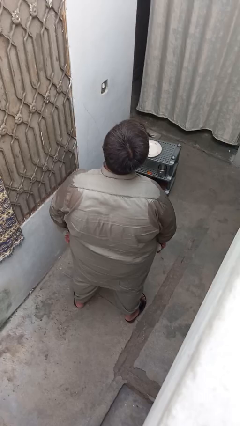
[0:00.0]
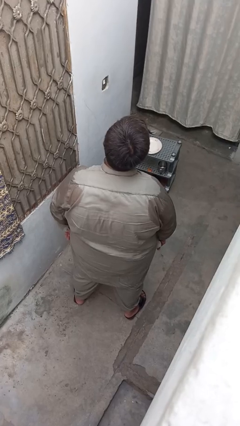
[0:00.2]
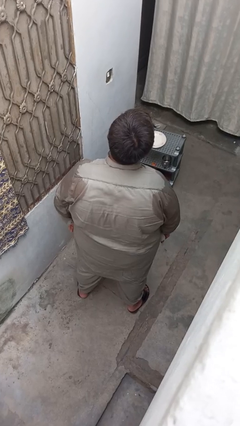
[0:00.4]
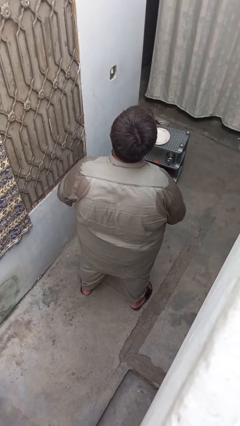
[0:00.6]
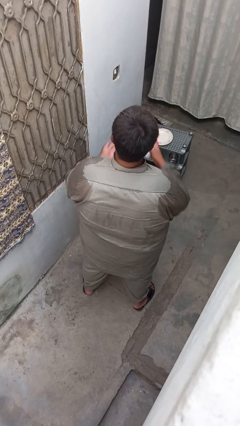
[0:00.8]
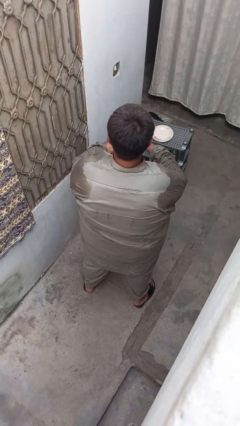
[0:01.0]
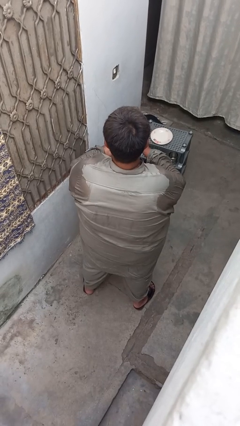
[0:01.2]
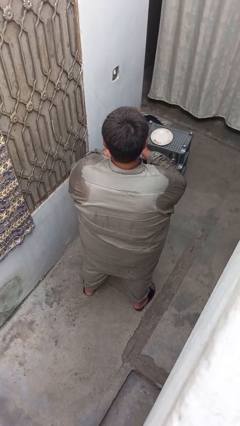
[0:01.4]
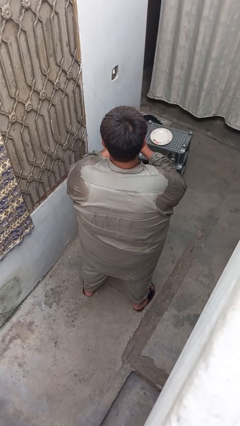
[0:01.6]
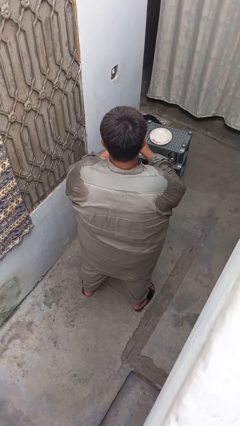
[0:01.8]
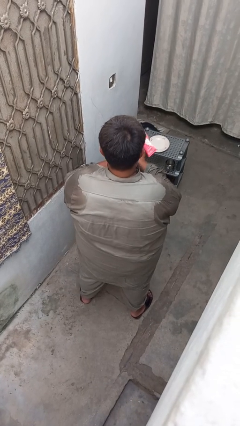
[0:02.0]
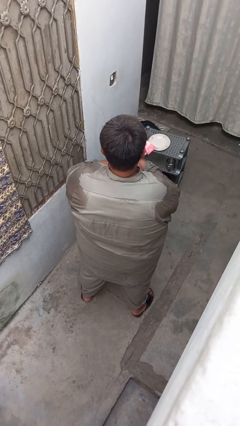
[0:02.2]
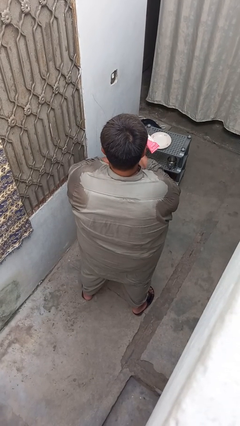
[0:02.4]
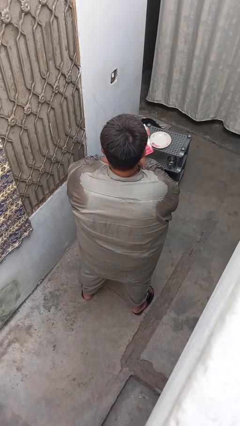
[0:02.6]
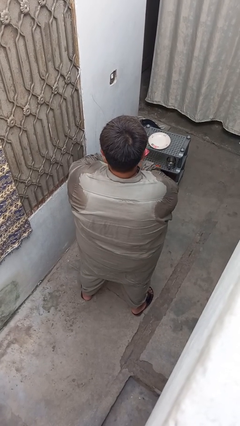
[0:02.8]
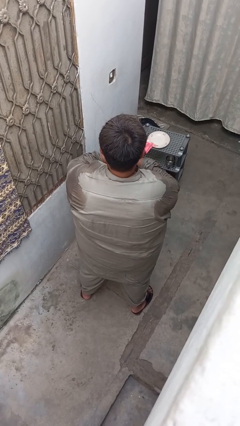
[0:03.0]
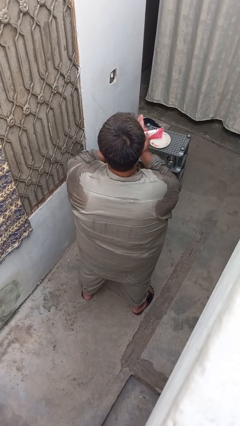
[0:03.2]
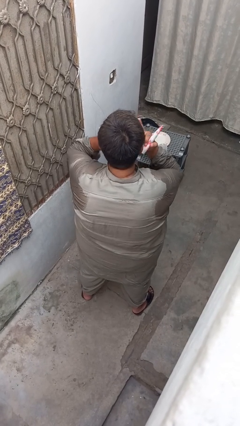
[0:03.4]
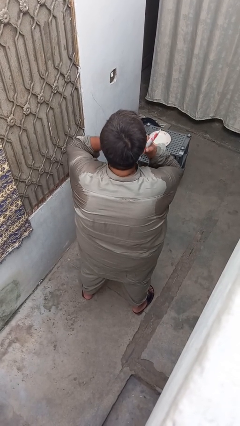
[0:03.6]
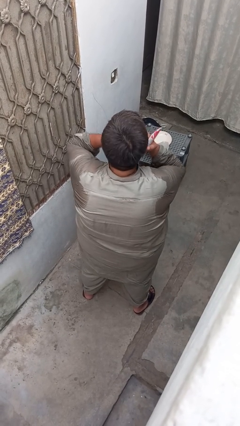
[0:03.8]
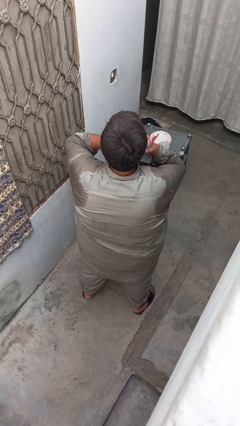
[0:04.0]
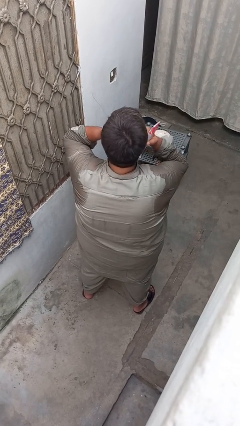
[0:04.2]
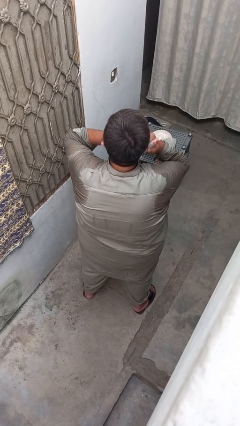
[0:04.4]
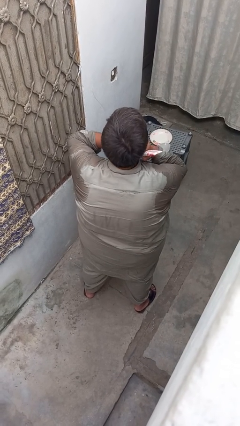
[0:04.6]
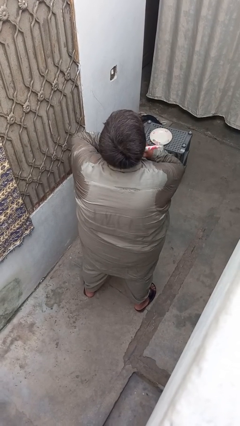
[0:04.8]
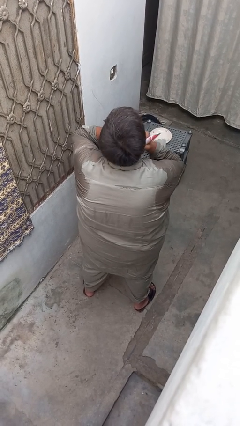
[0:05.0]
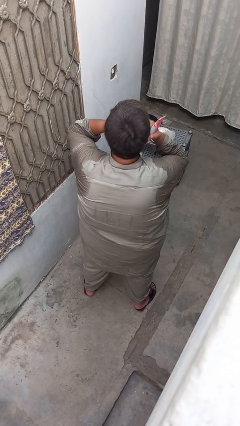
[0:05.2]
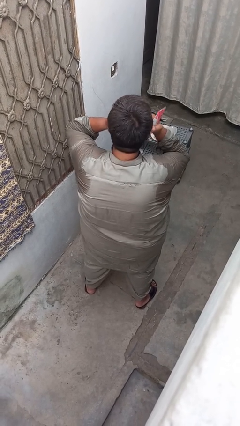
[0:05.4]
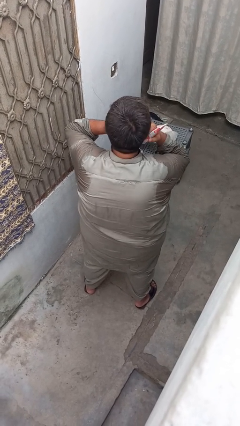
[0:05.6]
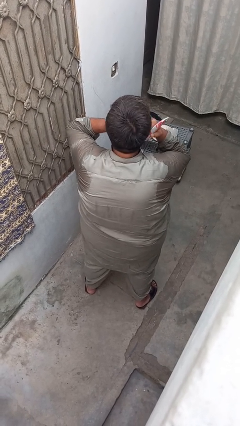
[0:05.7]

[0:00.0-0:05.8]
person applies facial moisturizer

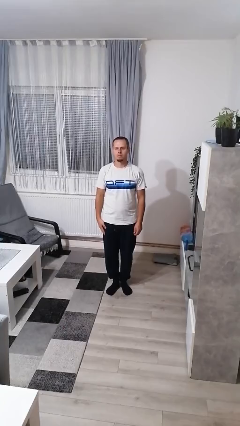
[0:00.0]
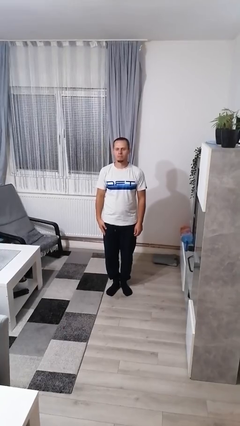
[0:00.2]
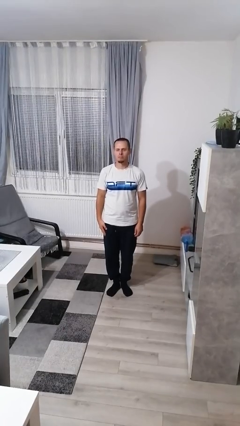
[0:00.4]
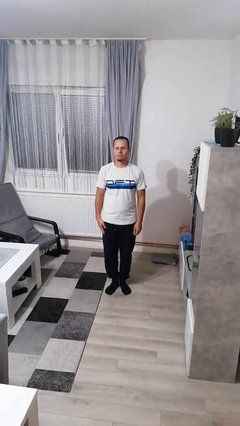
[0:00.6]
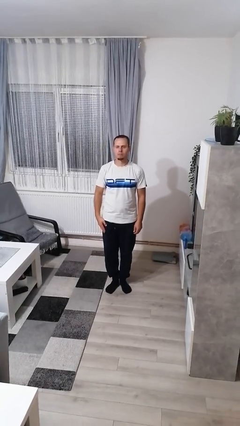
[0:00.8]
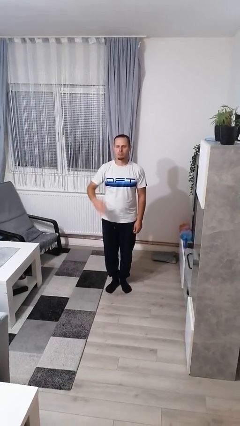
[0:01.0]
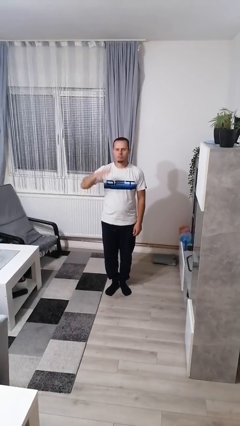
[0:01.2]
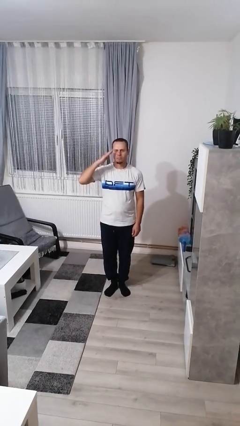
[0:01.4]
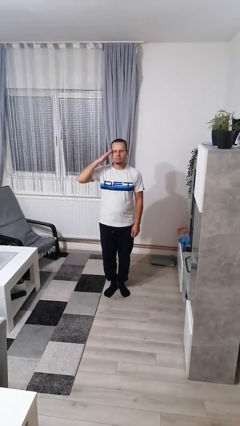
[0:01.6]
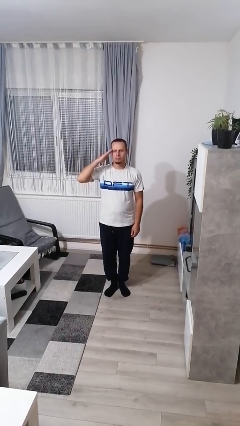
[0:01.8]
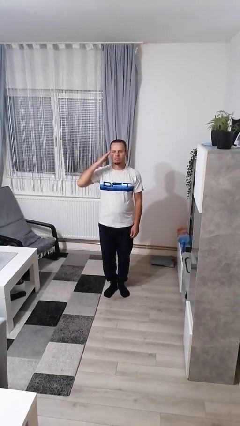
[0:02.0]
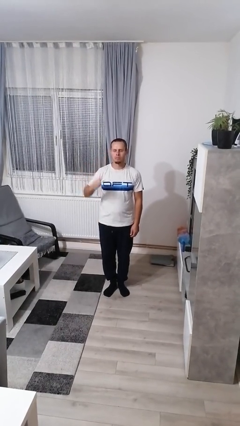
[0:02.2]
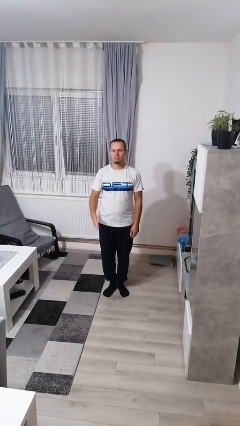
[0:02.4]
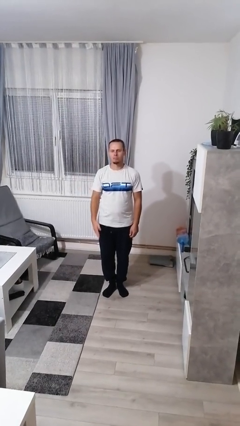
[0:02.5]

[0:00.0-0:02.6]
person salutes

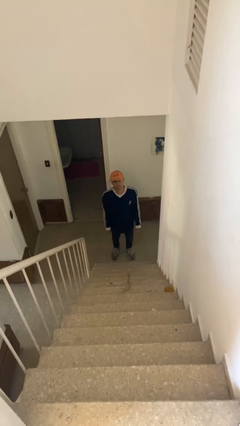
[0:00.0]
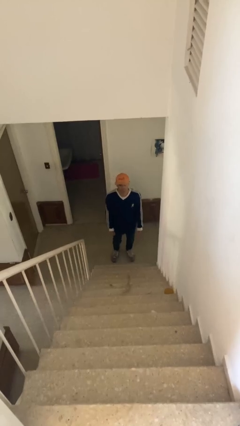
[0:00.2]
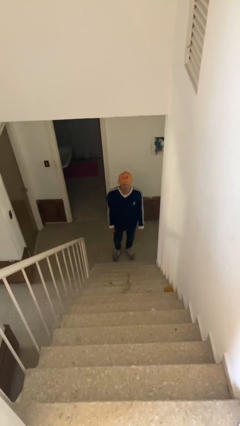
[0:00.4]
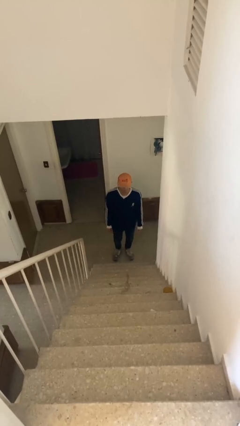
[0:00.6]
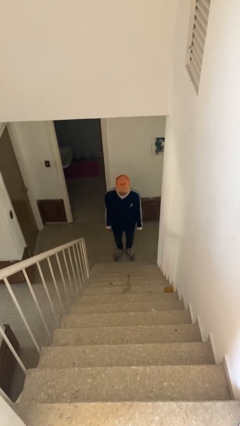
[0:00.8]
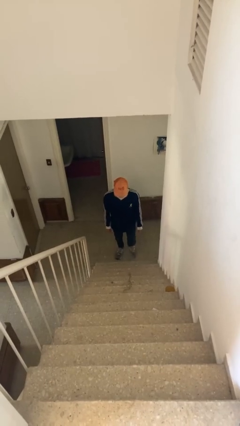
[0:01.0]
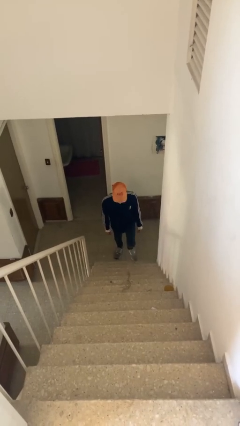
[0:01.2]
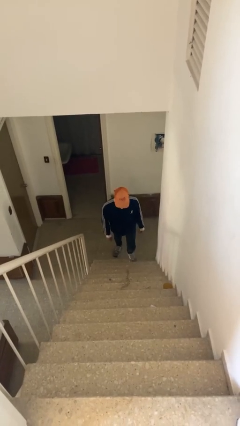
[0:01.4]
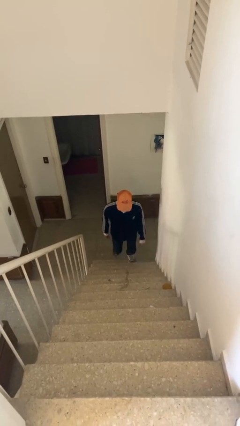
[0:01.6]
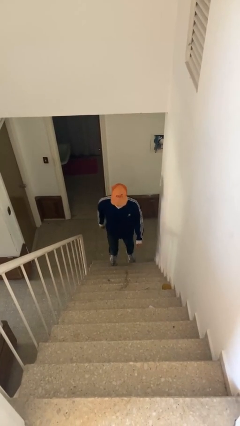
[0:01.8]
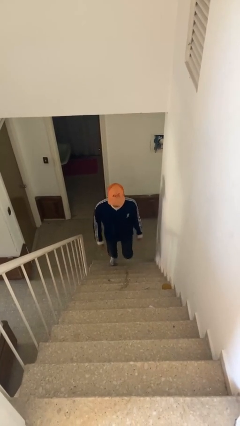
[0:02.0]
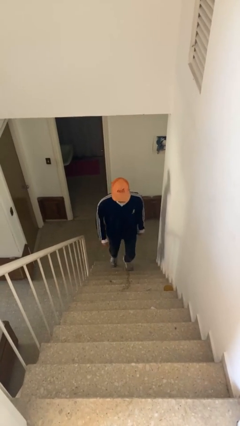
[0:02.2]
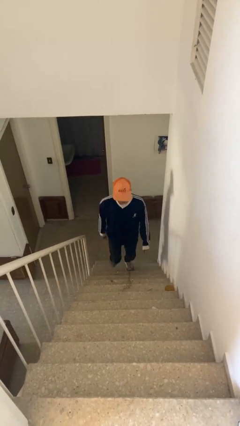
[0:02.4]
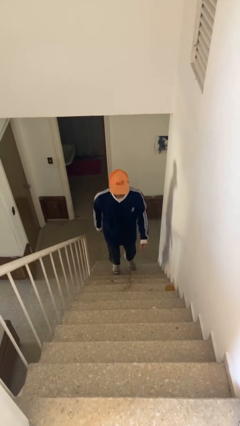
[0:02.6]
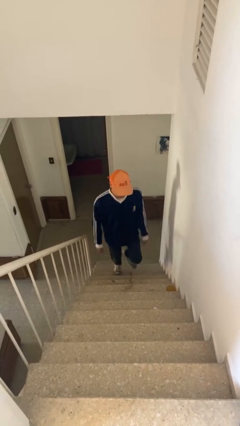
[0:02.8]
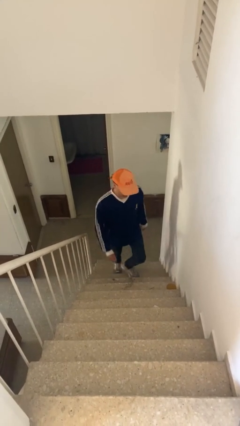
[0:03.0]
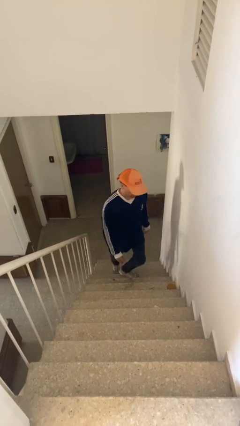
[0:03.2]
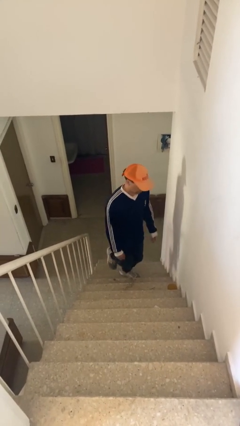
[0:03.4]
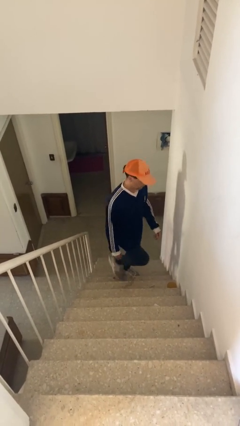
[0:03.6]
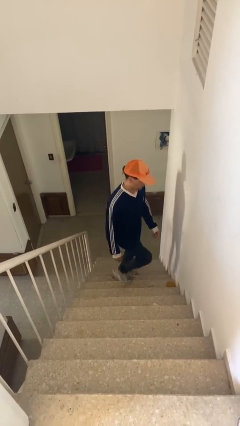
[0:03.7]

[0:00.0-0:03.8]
person climbs up stairs

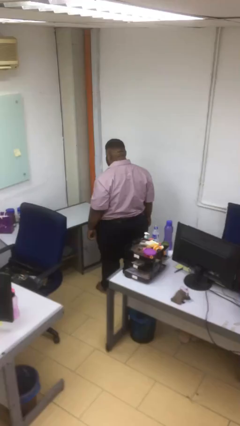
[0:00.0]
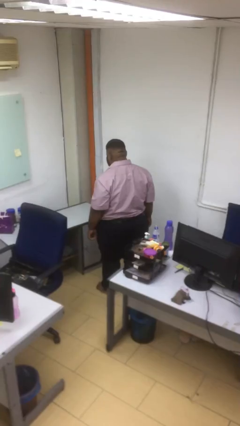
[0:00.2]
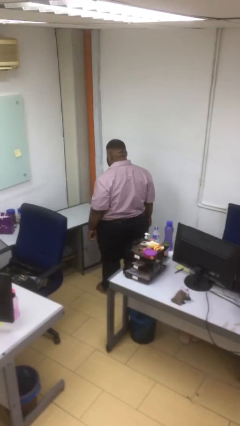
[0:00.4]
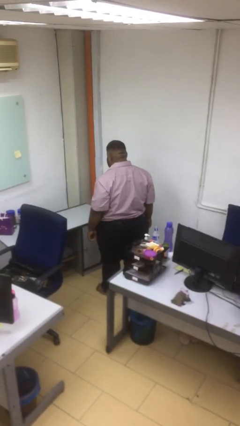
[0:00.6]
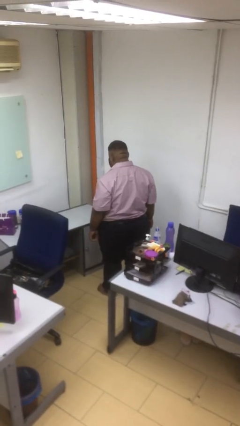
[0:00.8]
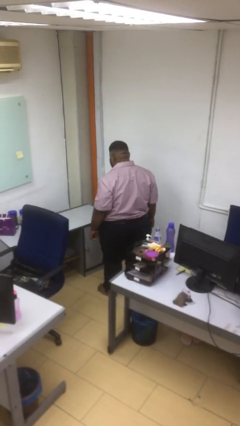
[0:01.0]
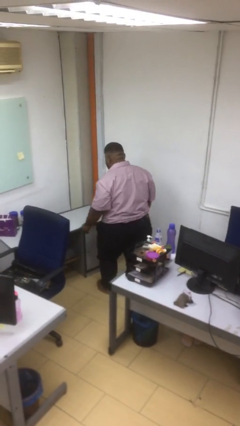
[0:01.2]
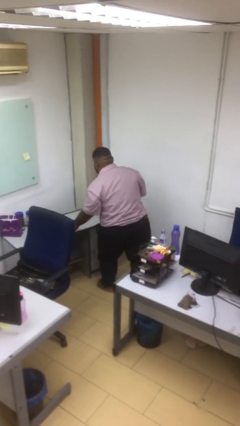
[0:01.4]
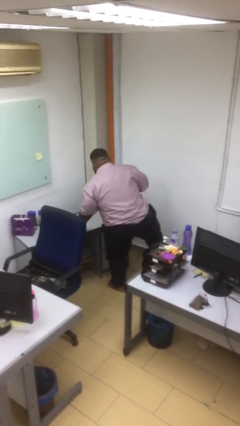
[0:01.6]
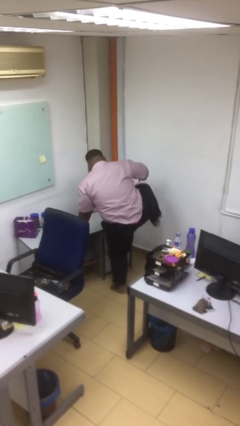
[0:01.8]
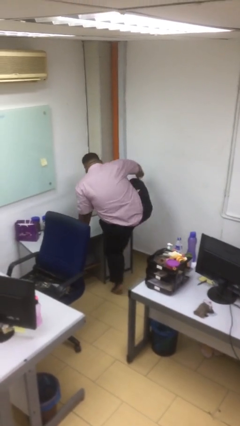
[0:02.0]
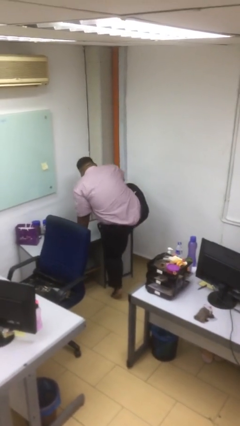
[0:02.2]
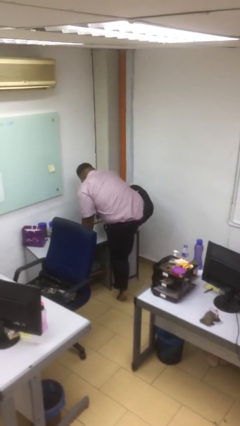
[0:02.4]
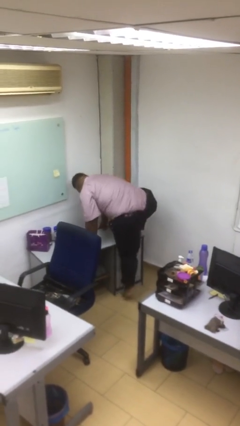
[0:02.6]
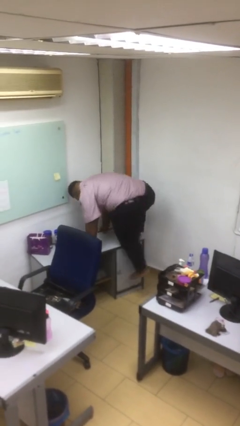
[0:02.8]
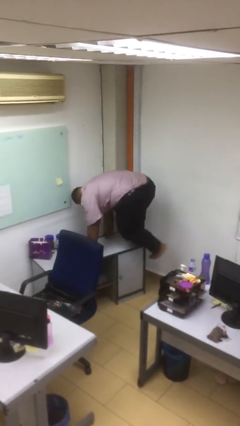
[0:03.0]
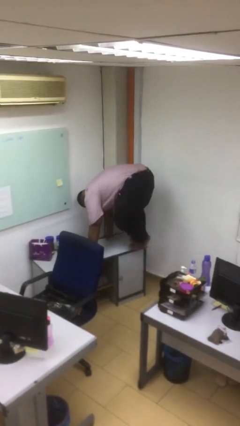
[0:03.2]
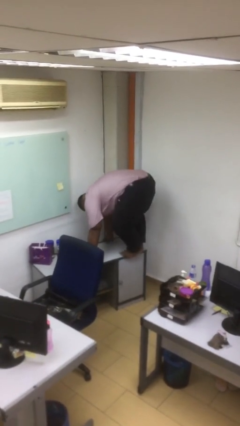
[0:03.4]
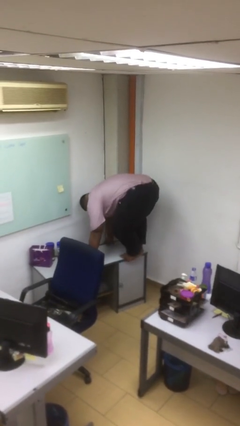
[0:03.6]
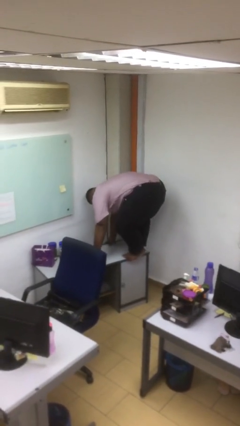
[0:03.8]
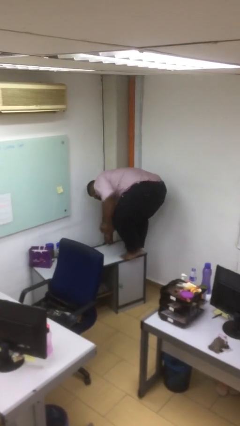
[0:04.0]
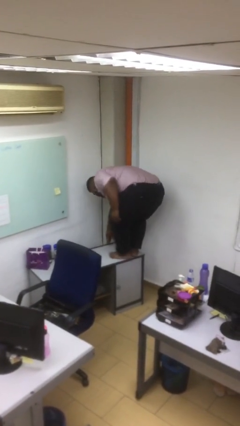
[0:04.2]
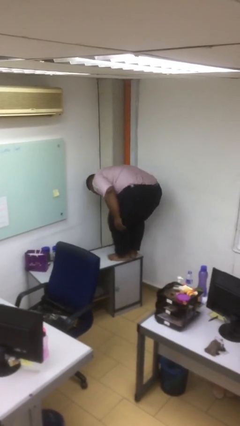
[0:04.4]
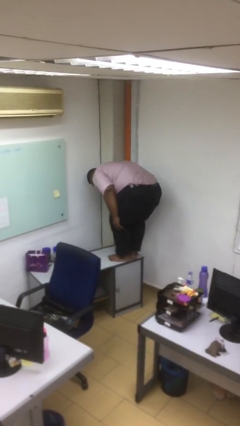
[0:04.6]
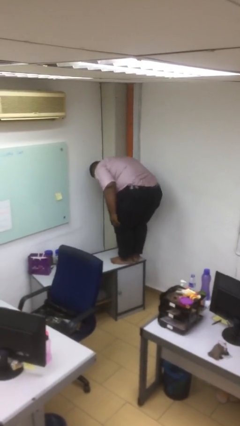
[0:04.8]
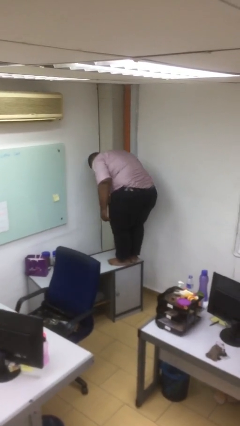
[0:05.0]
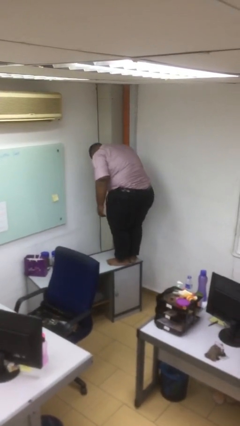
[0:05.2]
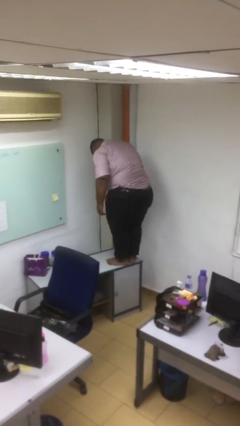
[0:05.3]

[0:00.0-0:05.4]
person climbs on table

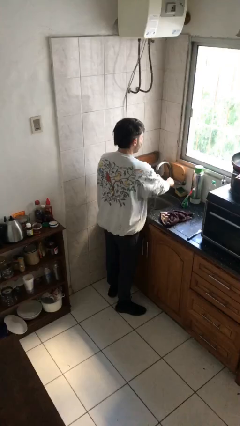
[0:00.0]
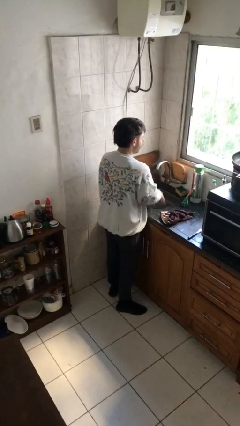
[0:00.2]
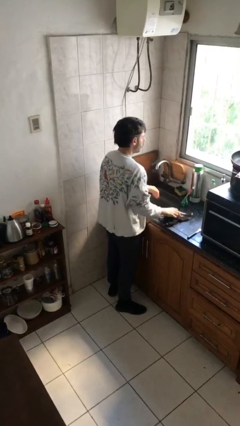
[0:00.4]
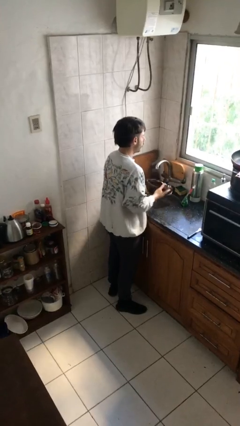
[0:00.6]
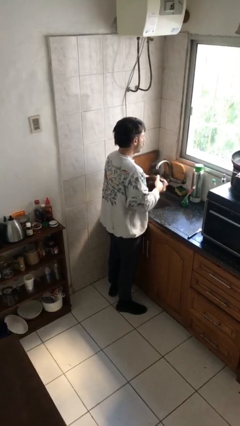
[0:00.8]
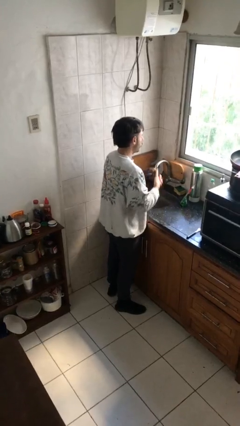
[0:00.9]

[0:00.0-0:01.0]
person dries hands with towel
